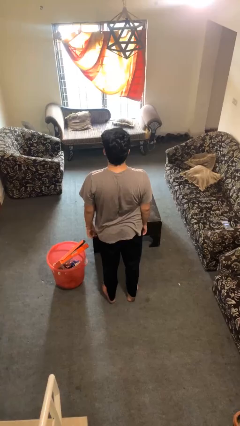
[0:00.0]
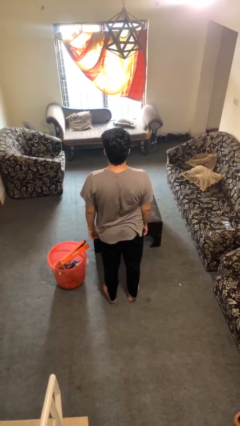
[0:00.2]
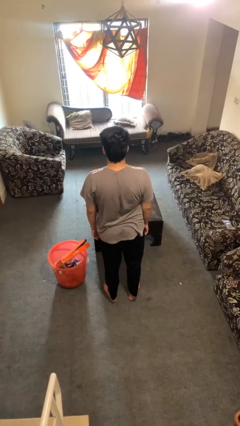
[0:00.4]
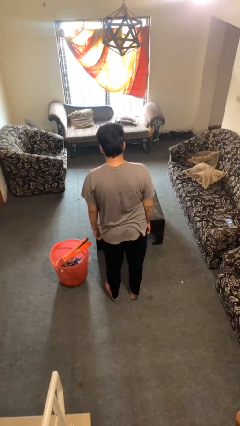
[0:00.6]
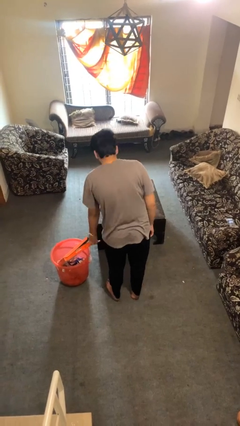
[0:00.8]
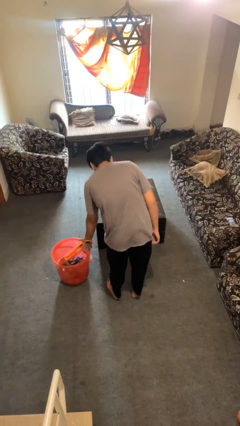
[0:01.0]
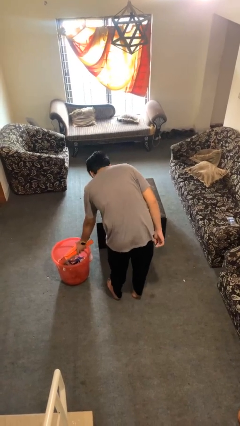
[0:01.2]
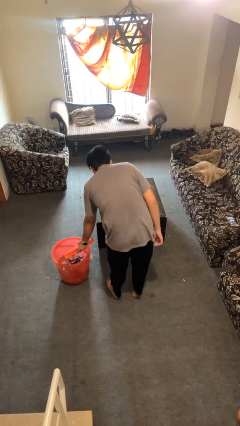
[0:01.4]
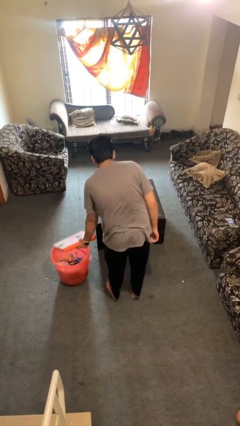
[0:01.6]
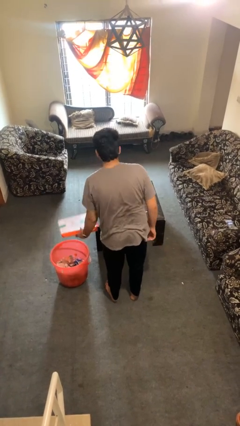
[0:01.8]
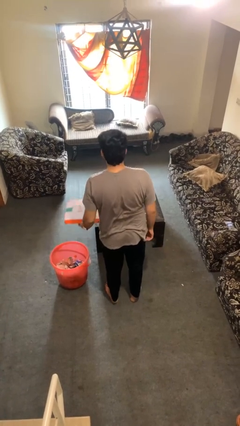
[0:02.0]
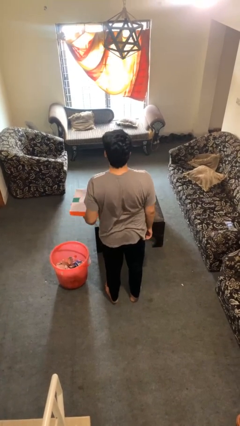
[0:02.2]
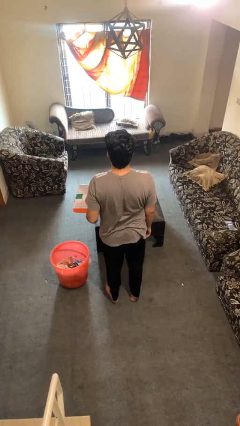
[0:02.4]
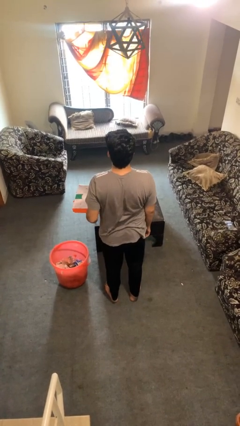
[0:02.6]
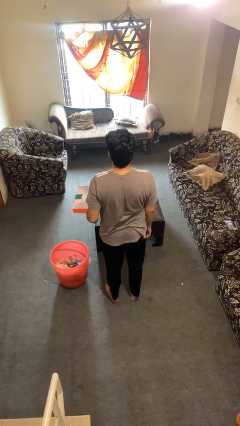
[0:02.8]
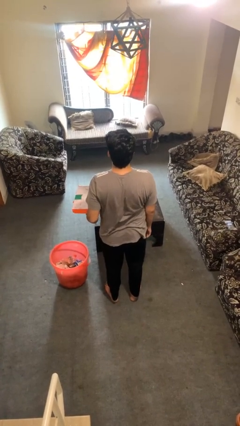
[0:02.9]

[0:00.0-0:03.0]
person takes object from basket

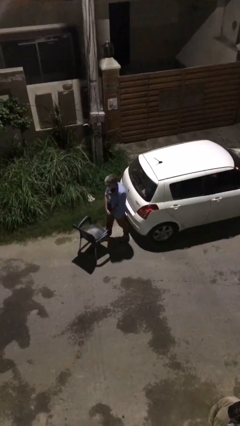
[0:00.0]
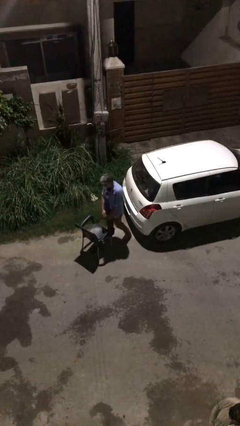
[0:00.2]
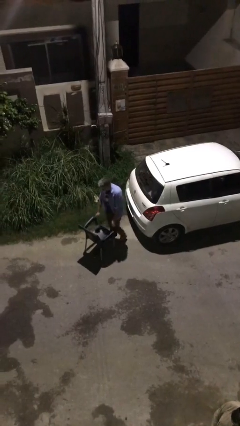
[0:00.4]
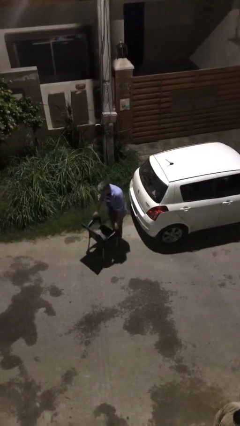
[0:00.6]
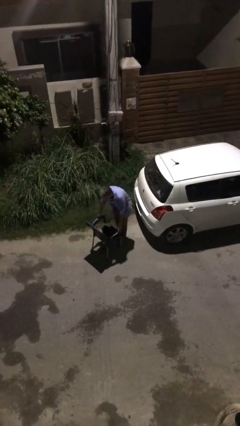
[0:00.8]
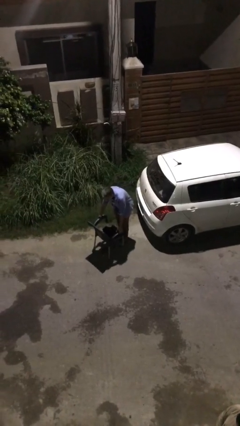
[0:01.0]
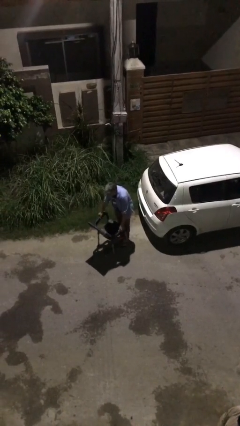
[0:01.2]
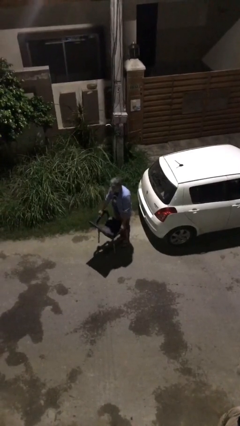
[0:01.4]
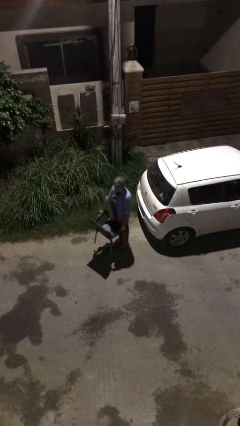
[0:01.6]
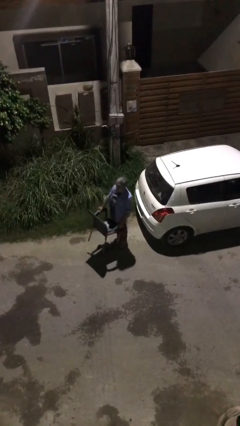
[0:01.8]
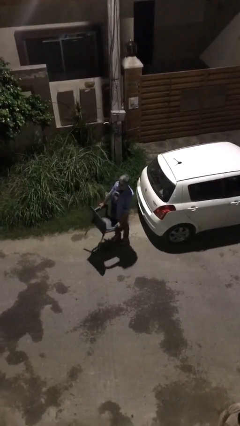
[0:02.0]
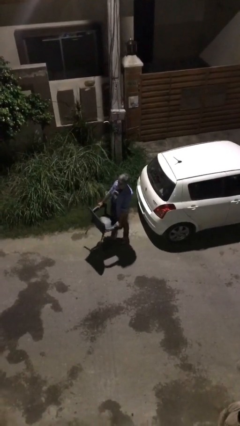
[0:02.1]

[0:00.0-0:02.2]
person picks up object from floor

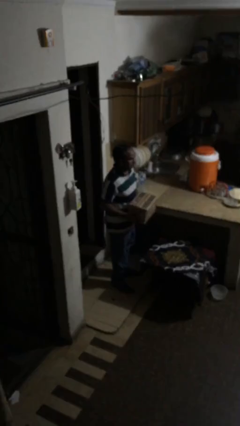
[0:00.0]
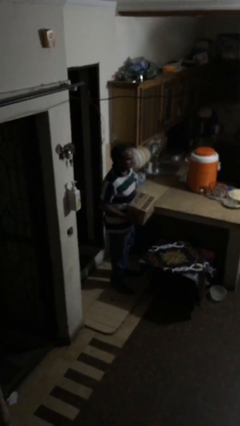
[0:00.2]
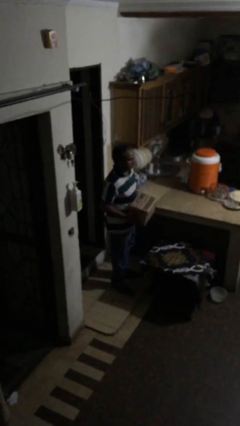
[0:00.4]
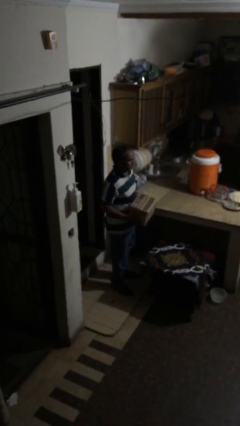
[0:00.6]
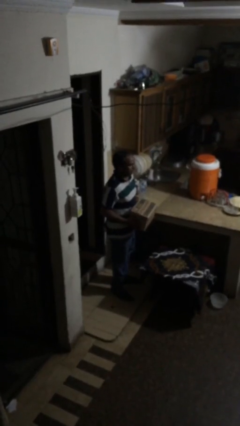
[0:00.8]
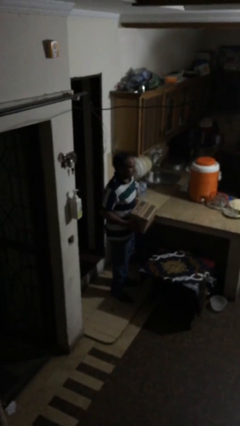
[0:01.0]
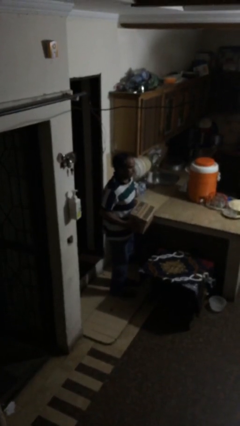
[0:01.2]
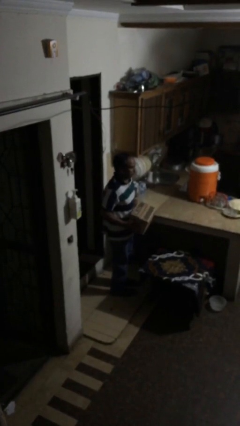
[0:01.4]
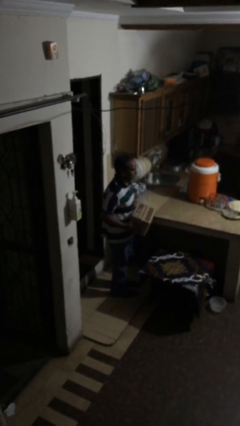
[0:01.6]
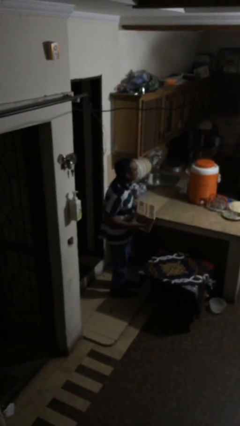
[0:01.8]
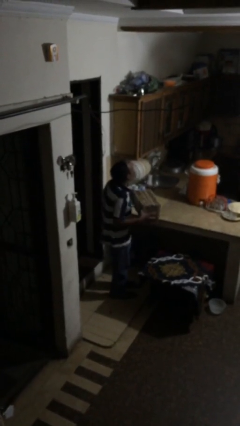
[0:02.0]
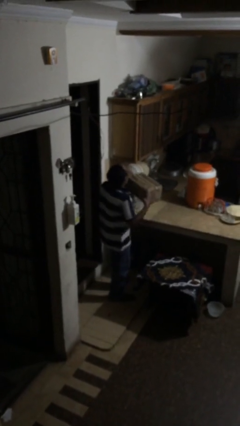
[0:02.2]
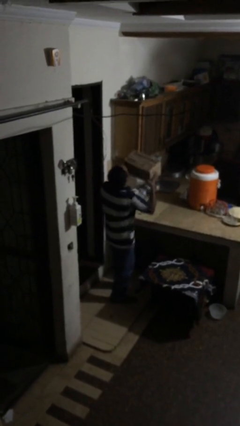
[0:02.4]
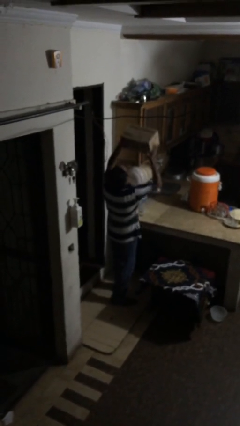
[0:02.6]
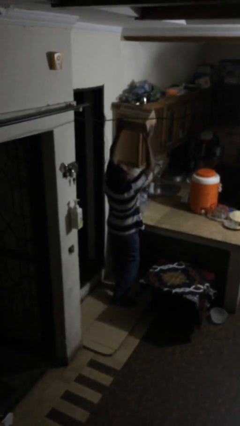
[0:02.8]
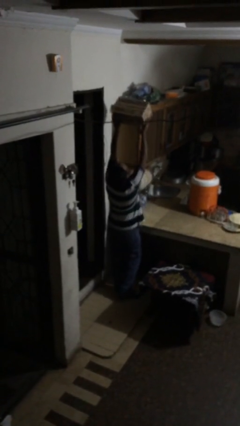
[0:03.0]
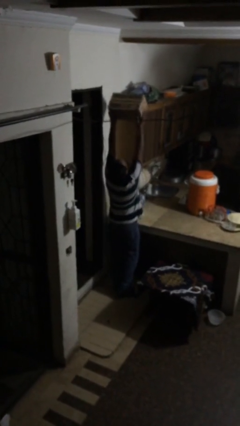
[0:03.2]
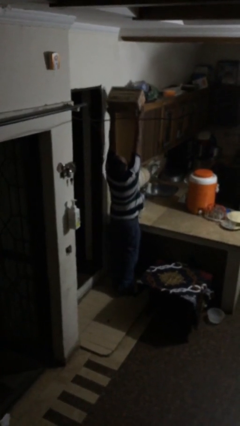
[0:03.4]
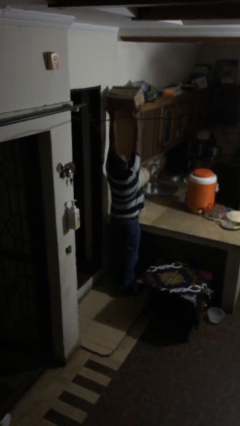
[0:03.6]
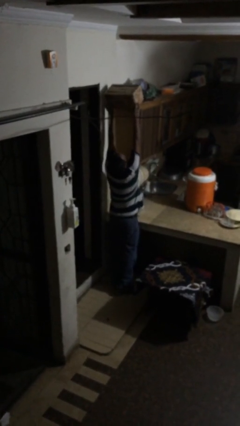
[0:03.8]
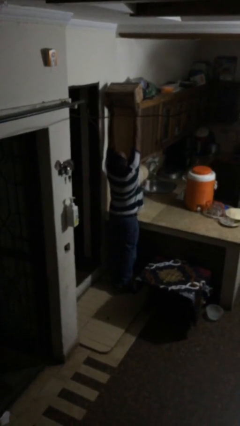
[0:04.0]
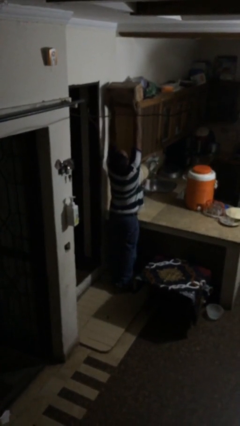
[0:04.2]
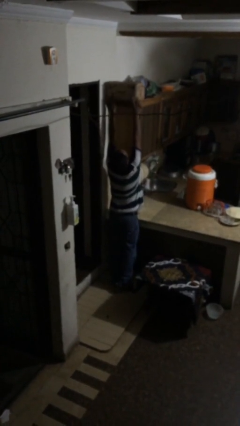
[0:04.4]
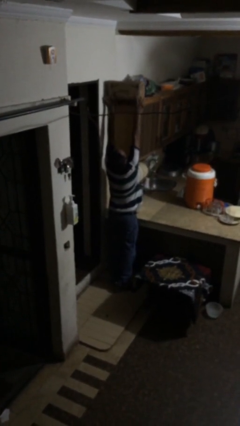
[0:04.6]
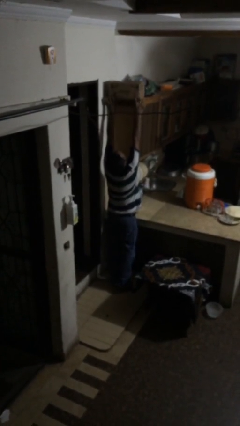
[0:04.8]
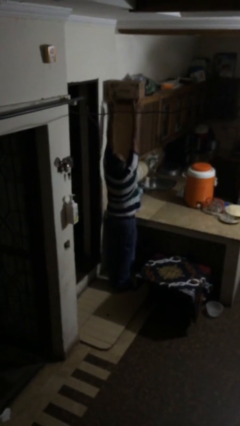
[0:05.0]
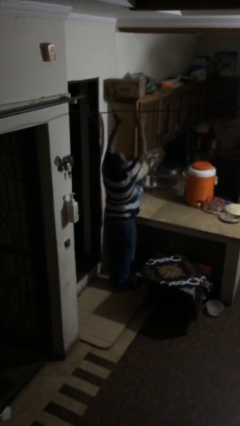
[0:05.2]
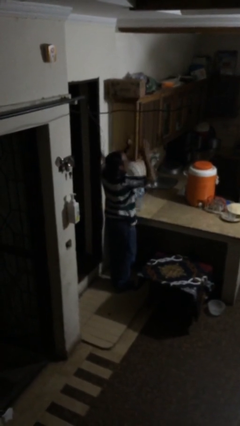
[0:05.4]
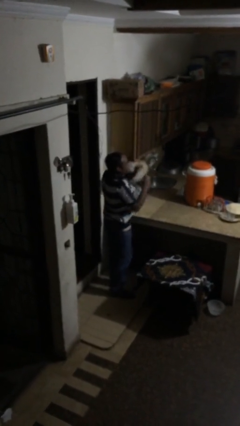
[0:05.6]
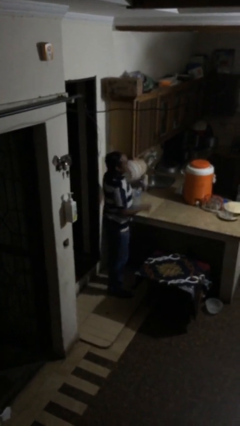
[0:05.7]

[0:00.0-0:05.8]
person puts down object on shelf

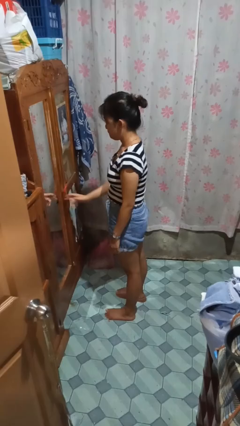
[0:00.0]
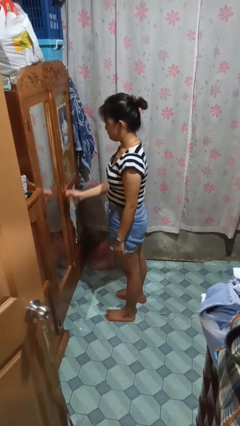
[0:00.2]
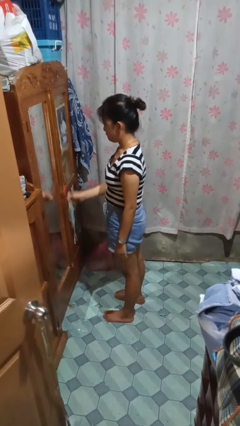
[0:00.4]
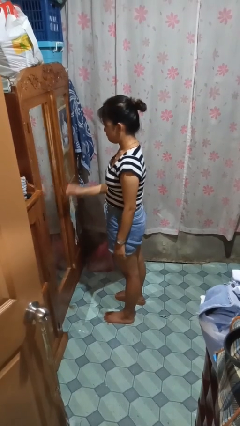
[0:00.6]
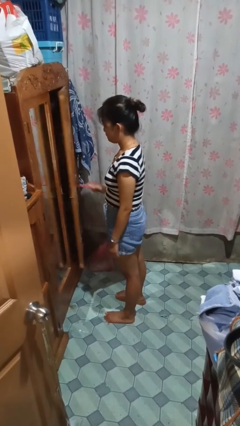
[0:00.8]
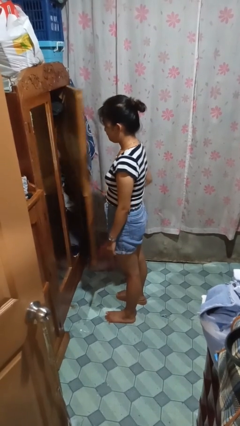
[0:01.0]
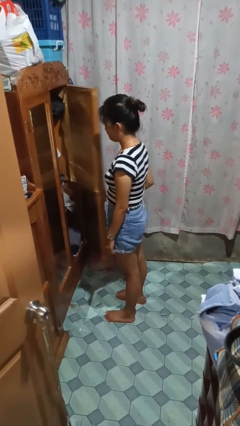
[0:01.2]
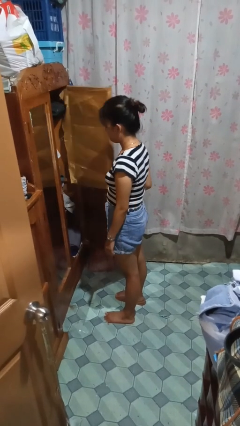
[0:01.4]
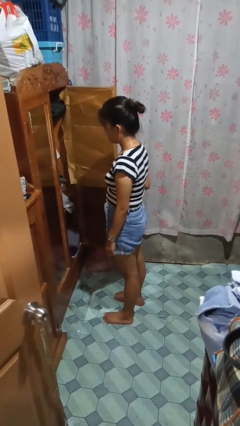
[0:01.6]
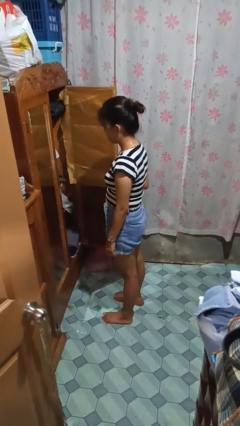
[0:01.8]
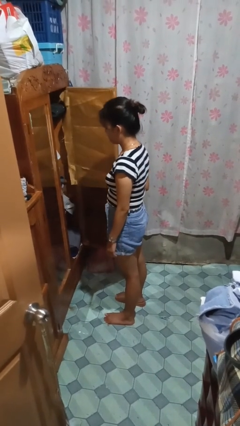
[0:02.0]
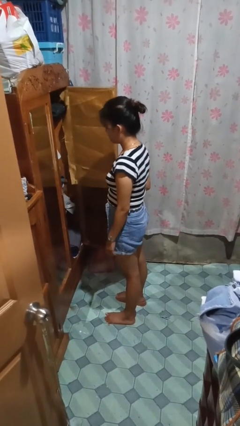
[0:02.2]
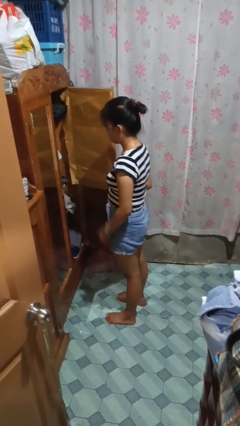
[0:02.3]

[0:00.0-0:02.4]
person opens closet door

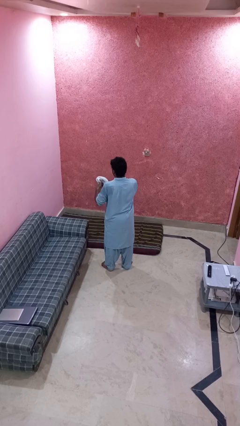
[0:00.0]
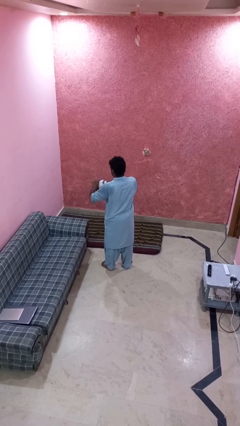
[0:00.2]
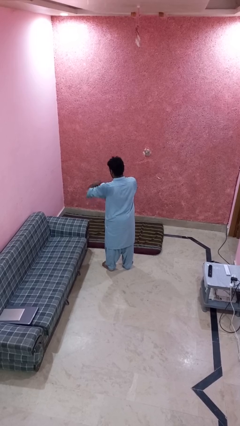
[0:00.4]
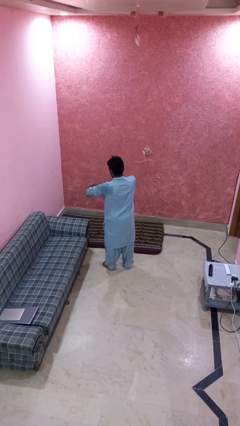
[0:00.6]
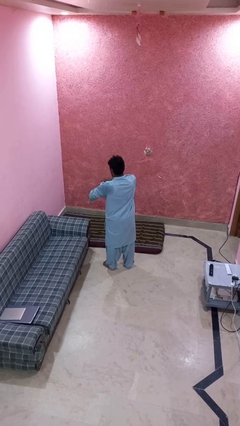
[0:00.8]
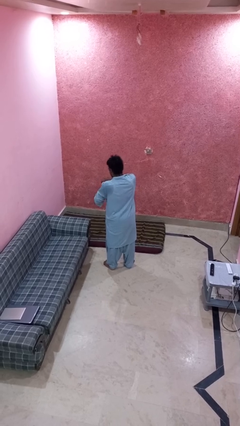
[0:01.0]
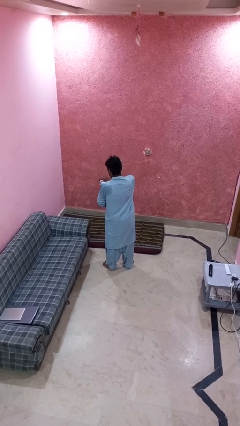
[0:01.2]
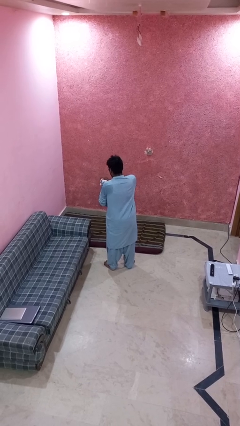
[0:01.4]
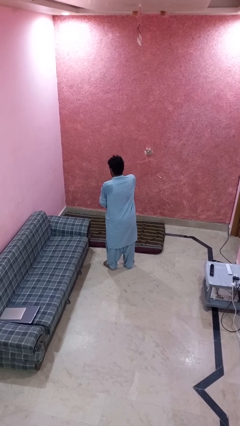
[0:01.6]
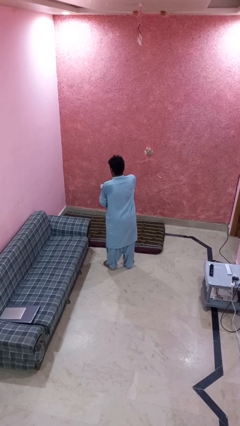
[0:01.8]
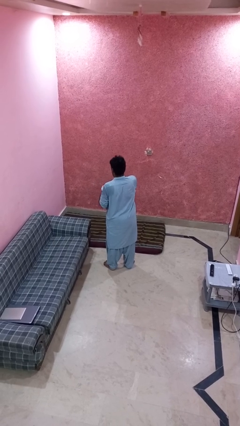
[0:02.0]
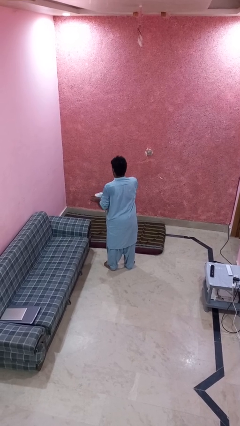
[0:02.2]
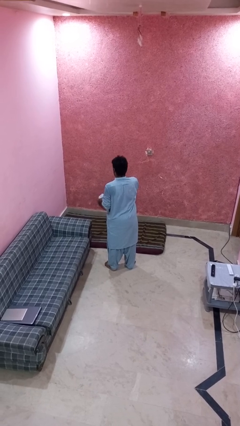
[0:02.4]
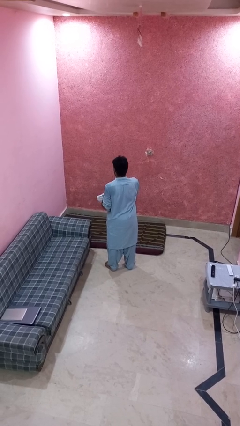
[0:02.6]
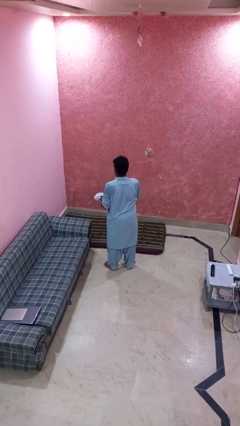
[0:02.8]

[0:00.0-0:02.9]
person squeezes object

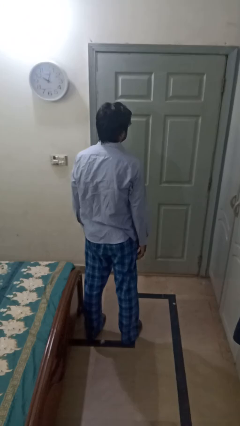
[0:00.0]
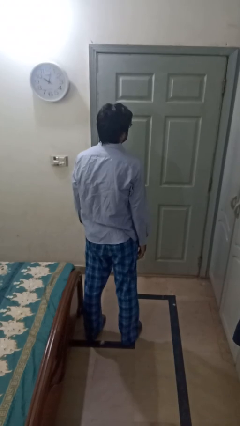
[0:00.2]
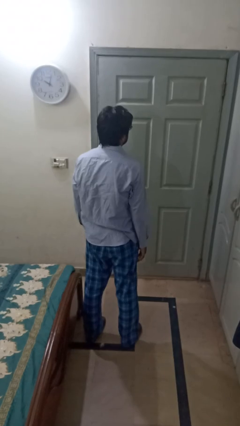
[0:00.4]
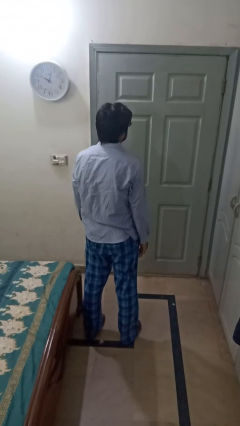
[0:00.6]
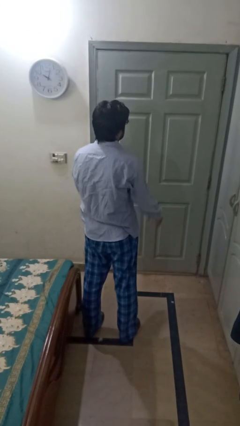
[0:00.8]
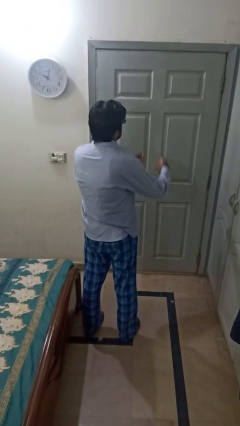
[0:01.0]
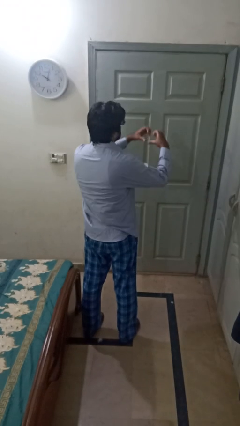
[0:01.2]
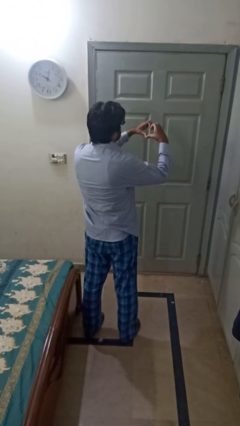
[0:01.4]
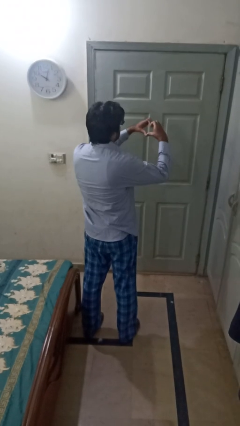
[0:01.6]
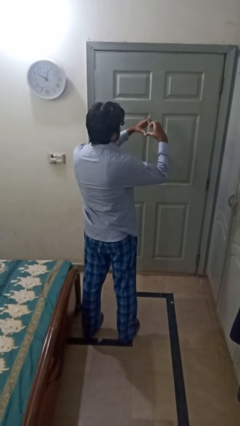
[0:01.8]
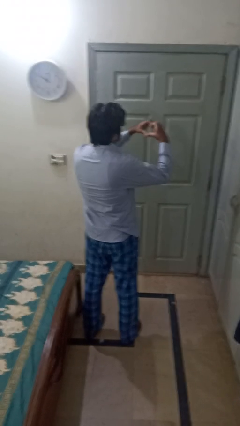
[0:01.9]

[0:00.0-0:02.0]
person gestures heart
